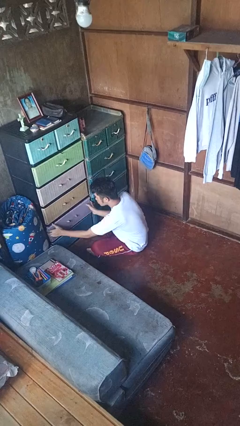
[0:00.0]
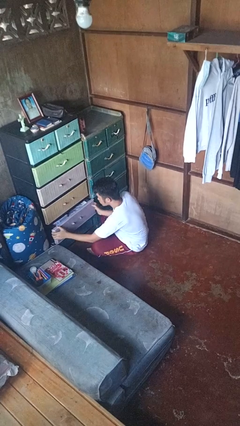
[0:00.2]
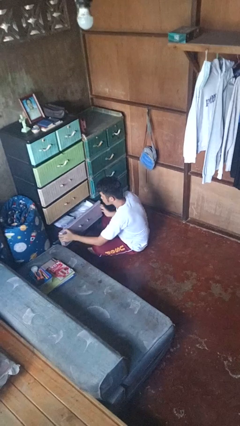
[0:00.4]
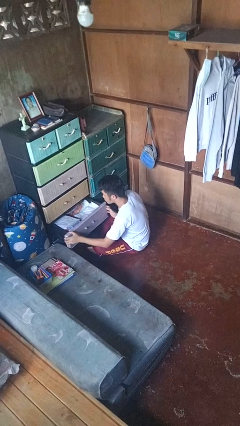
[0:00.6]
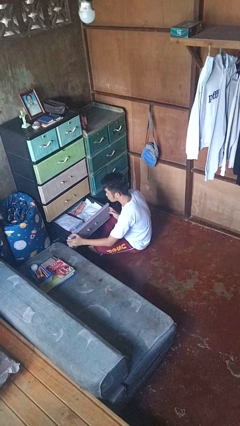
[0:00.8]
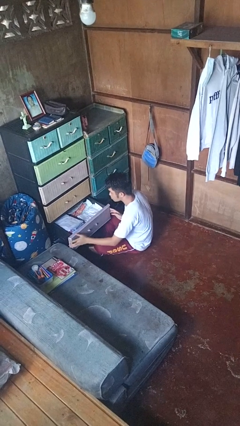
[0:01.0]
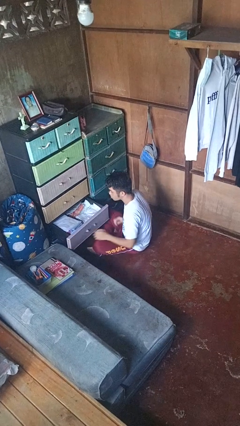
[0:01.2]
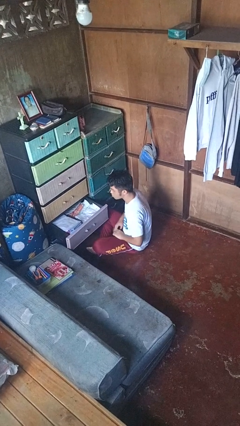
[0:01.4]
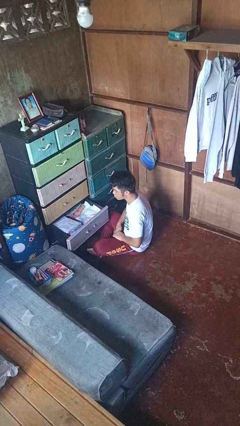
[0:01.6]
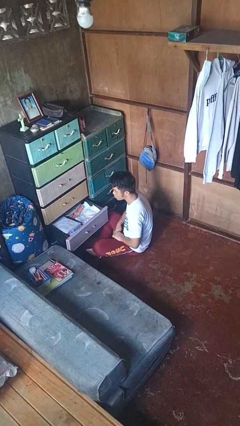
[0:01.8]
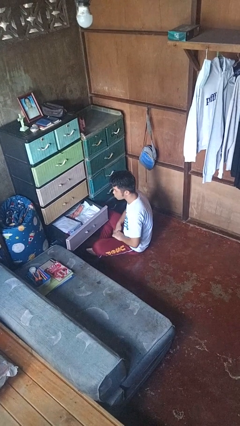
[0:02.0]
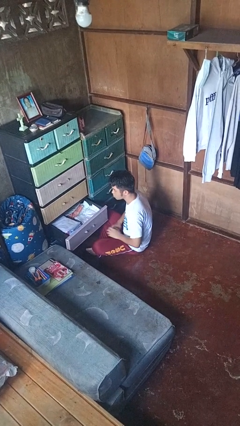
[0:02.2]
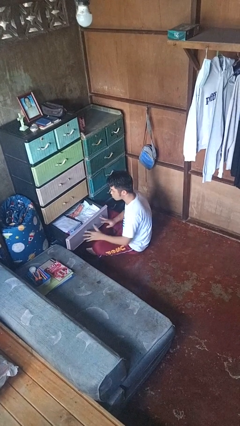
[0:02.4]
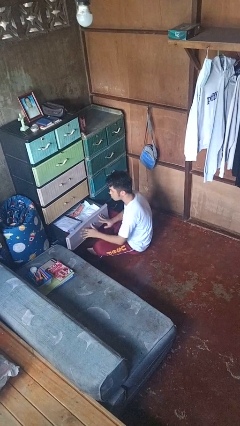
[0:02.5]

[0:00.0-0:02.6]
person opens dresser drawer

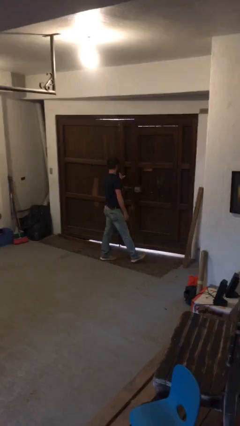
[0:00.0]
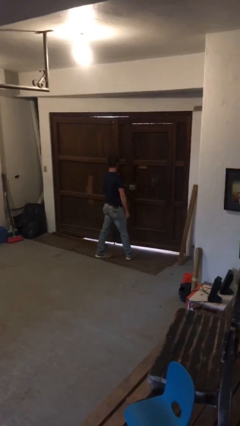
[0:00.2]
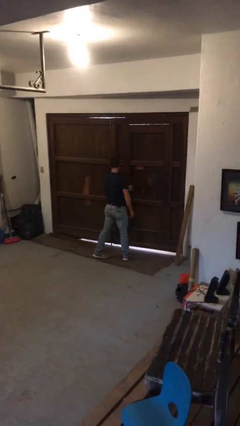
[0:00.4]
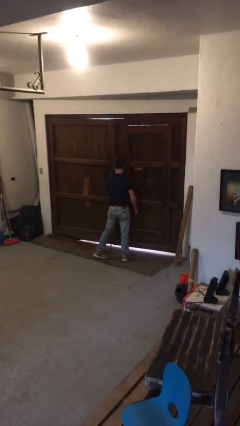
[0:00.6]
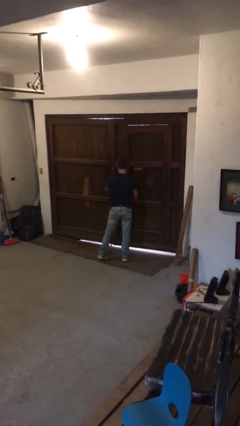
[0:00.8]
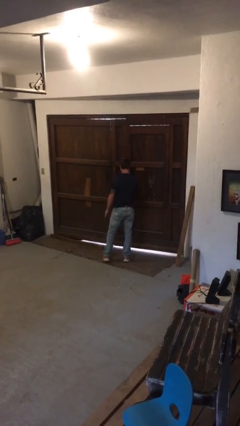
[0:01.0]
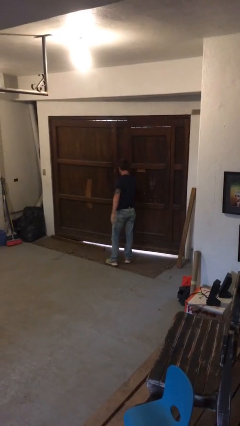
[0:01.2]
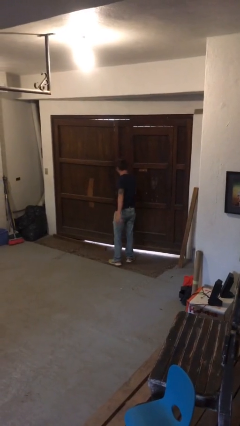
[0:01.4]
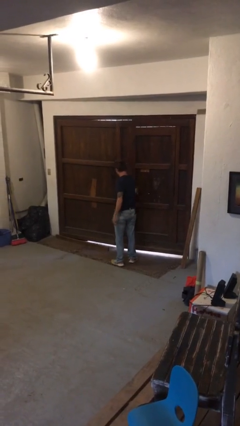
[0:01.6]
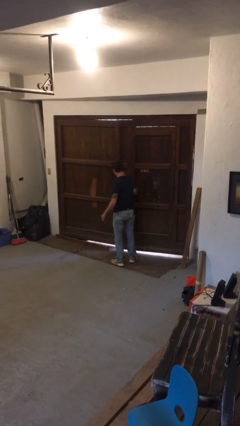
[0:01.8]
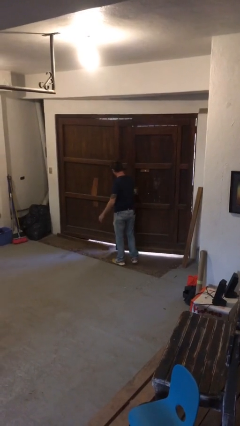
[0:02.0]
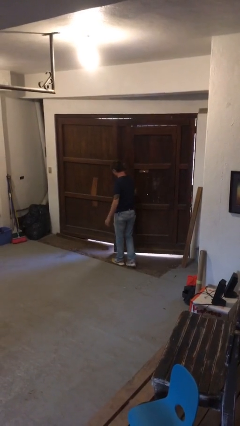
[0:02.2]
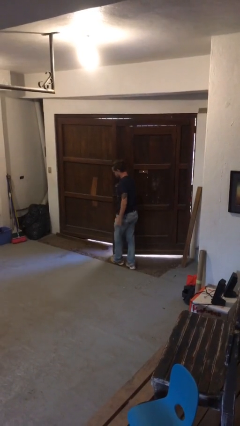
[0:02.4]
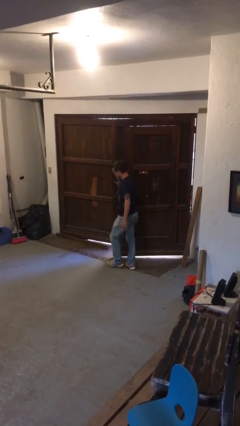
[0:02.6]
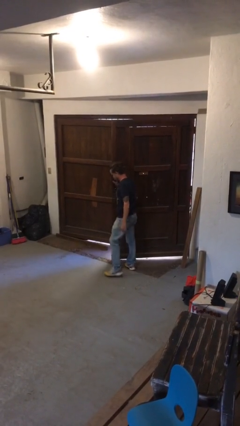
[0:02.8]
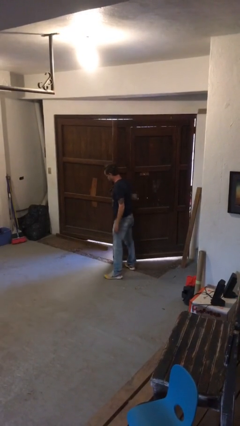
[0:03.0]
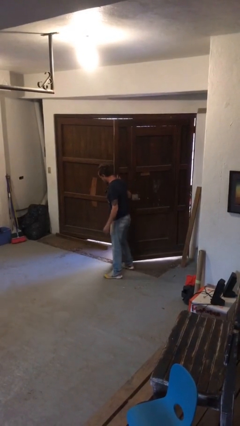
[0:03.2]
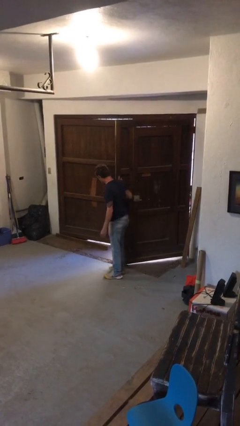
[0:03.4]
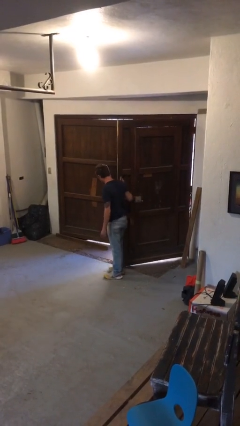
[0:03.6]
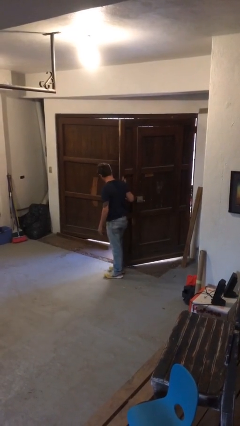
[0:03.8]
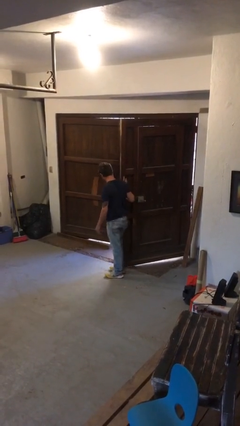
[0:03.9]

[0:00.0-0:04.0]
person opens gate

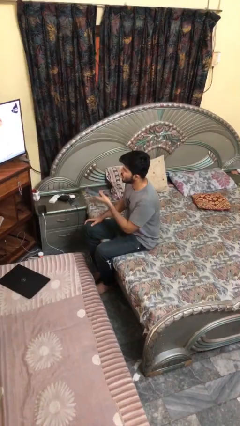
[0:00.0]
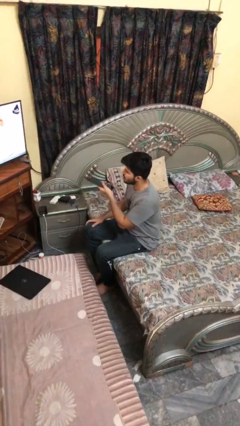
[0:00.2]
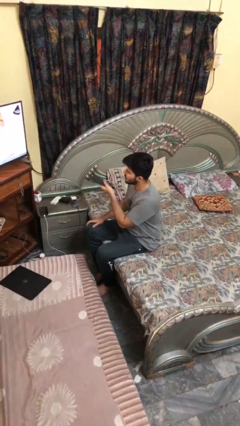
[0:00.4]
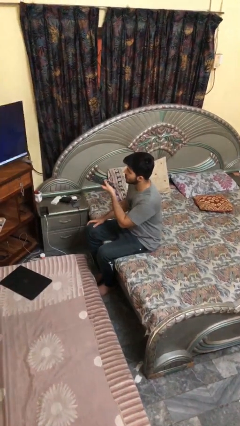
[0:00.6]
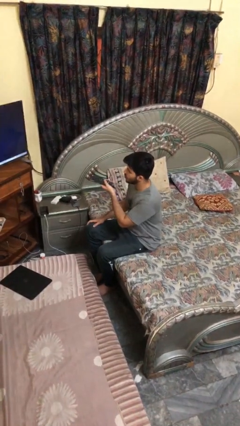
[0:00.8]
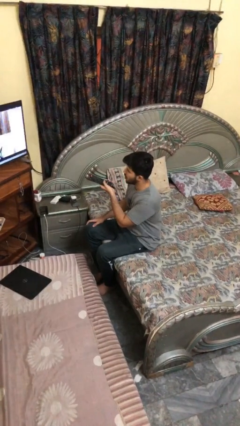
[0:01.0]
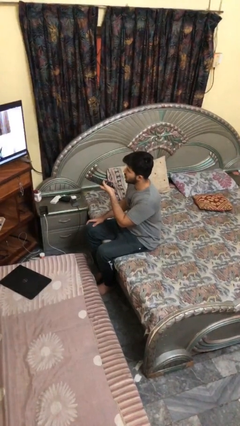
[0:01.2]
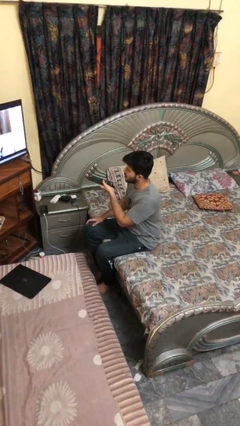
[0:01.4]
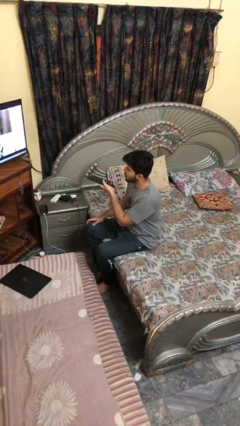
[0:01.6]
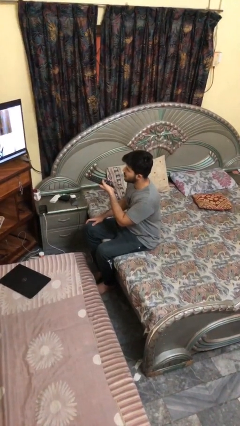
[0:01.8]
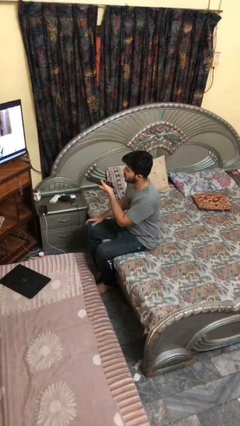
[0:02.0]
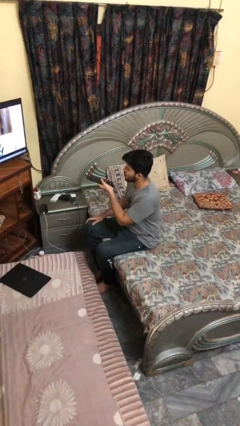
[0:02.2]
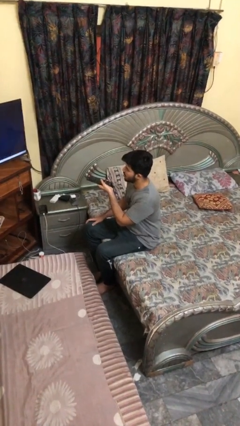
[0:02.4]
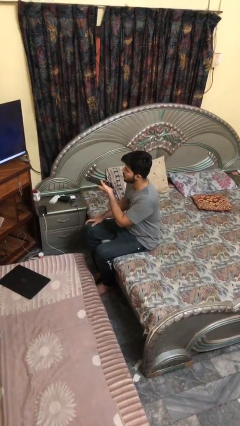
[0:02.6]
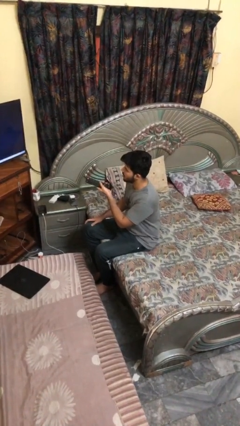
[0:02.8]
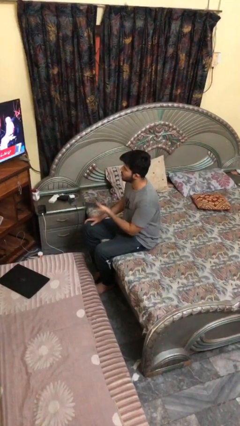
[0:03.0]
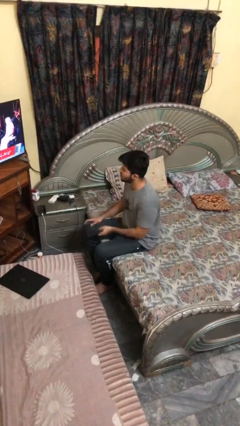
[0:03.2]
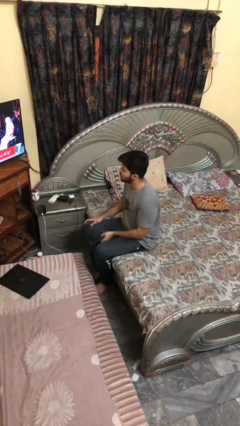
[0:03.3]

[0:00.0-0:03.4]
person uses television remote

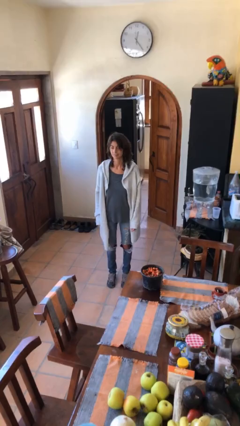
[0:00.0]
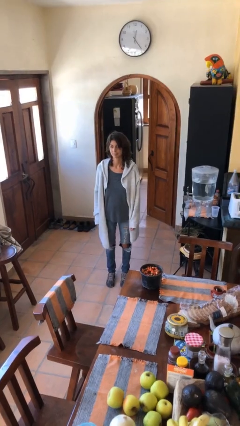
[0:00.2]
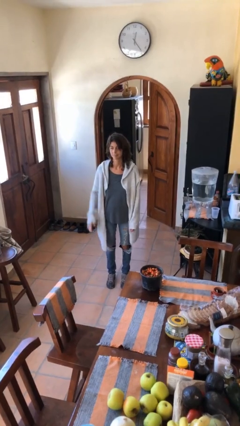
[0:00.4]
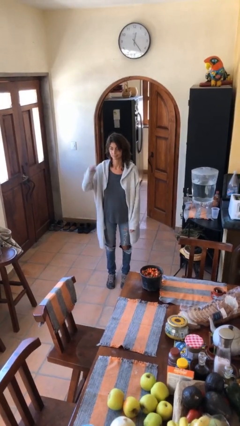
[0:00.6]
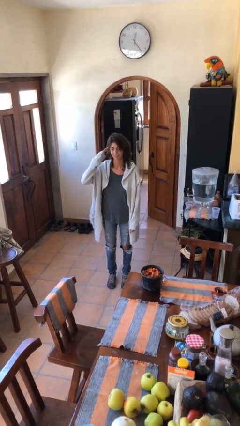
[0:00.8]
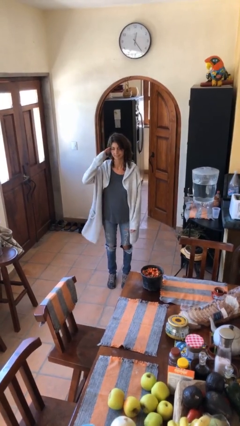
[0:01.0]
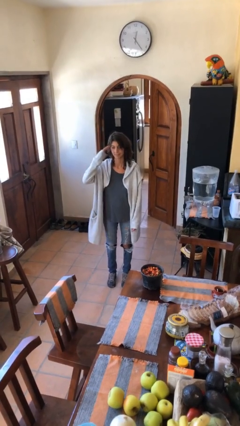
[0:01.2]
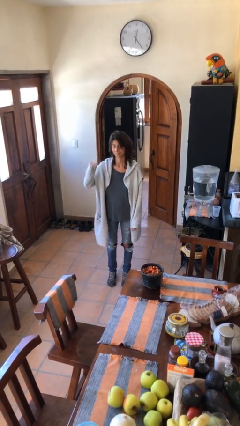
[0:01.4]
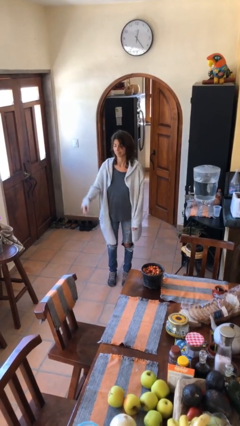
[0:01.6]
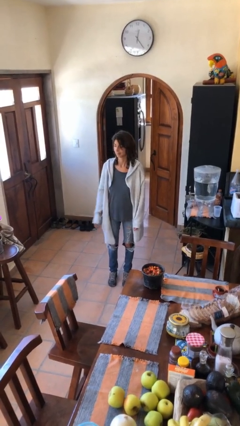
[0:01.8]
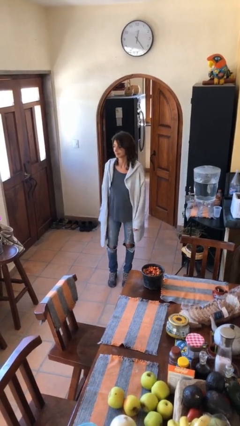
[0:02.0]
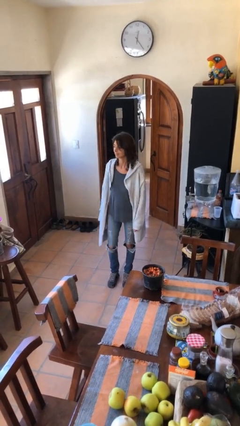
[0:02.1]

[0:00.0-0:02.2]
person salutes

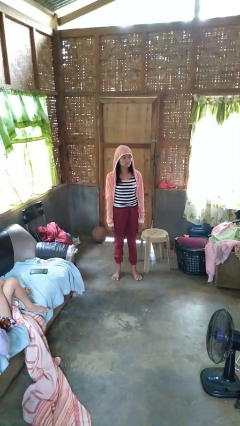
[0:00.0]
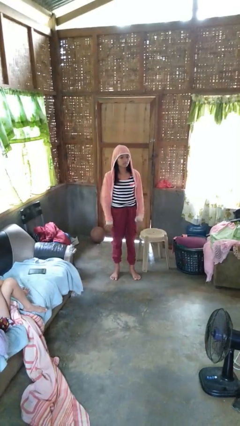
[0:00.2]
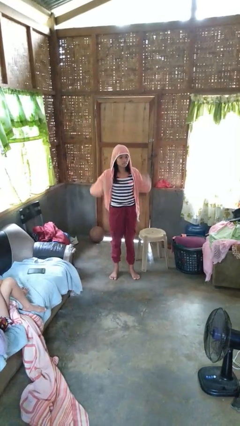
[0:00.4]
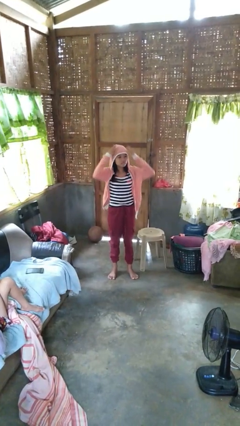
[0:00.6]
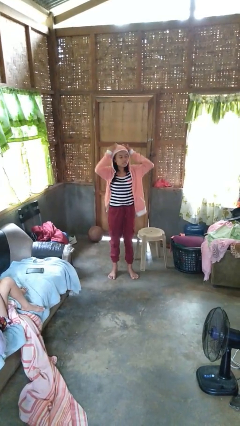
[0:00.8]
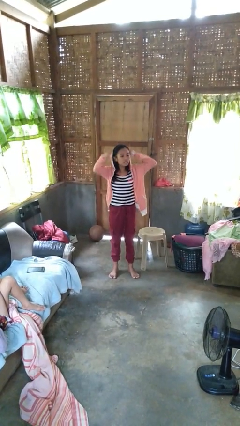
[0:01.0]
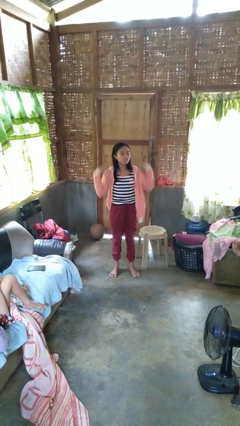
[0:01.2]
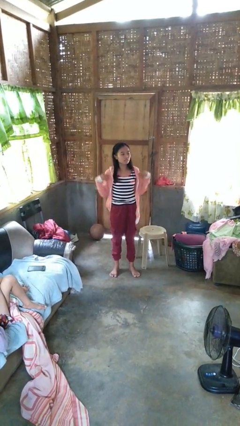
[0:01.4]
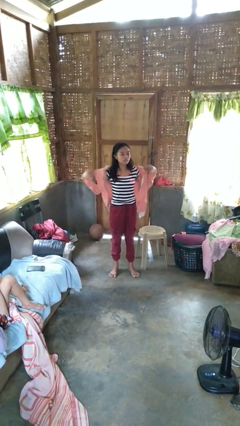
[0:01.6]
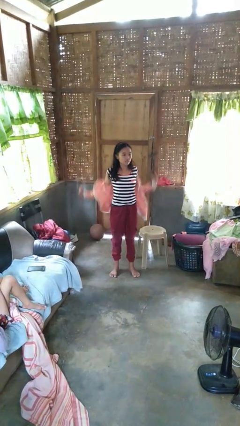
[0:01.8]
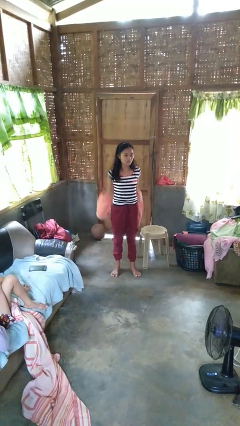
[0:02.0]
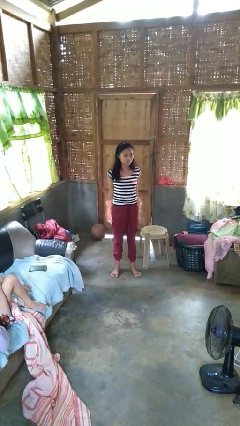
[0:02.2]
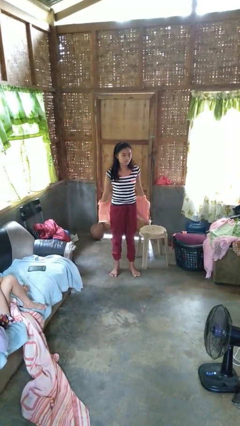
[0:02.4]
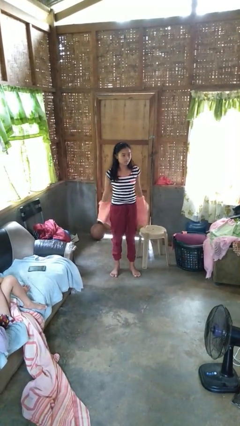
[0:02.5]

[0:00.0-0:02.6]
person takes off hoodie

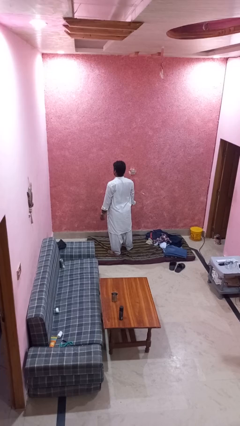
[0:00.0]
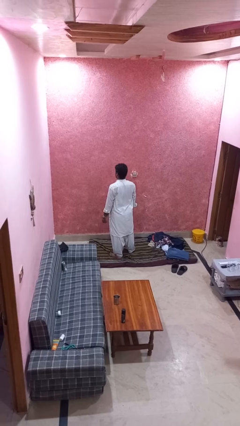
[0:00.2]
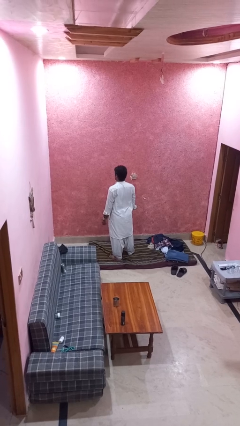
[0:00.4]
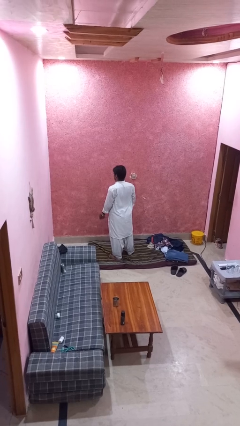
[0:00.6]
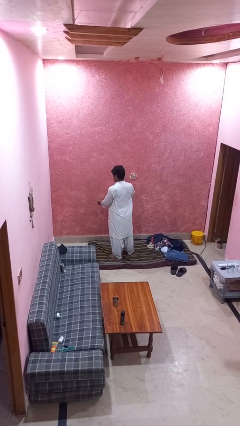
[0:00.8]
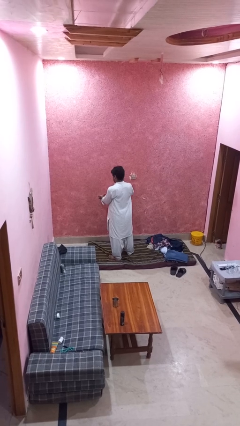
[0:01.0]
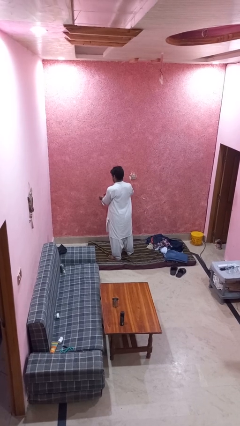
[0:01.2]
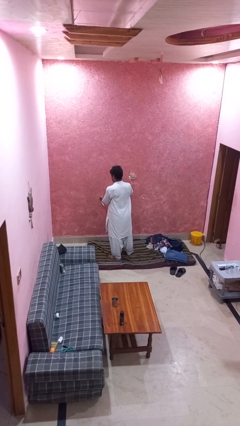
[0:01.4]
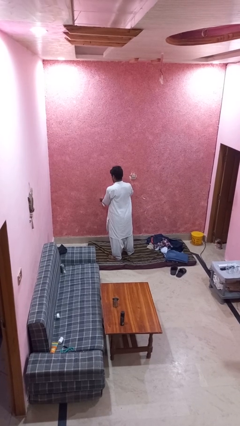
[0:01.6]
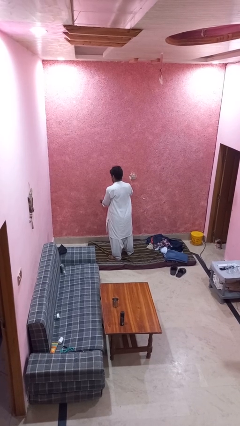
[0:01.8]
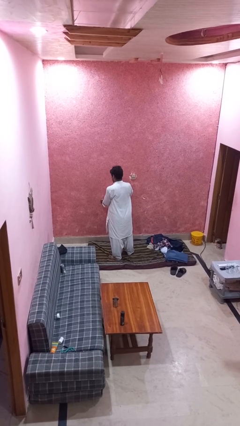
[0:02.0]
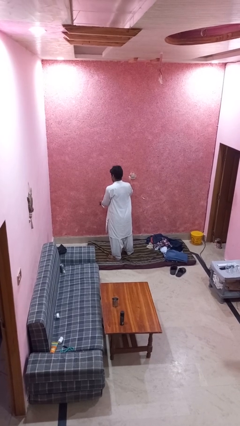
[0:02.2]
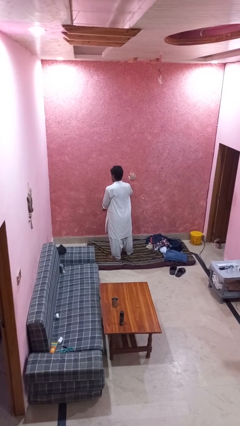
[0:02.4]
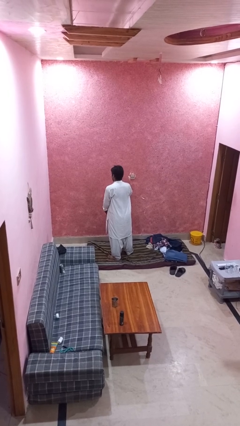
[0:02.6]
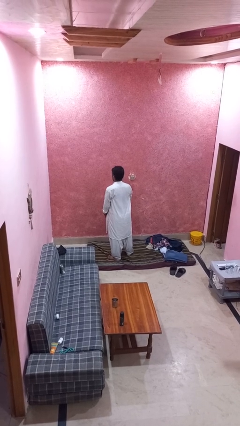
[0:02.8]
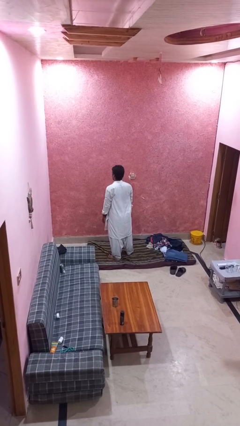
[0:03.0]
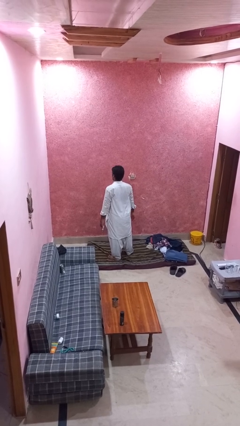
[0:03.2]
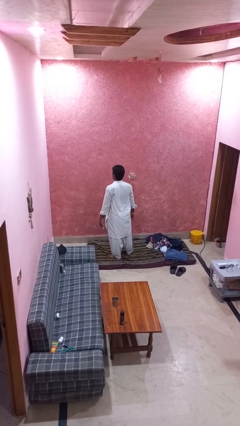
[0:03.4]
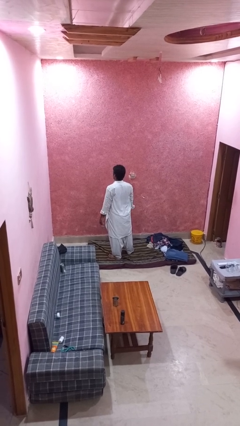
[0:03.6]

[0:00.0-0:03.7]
person takes off wristwatch
